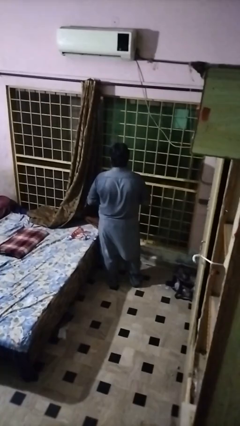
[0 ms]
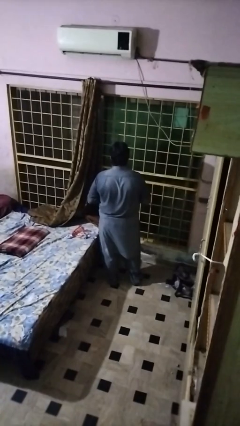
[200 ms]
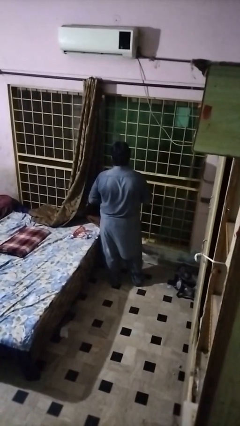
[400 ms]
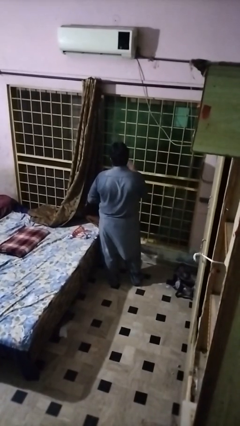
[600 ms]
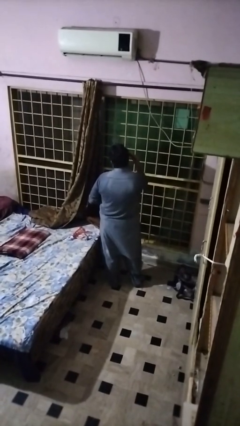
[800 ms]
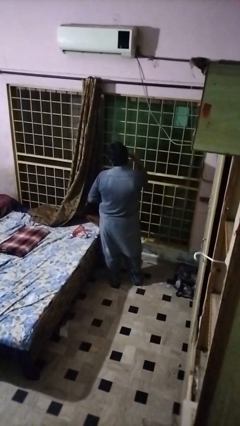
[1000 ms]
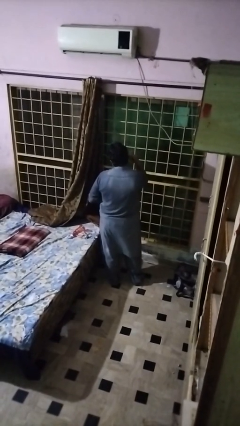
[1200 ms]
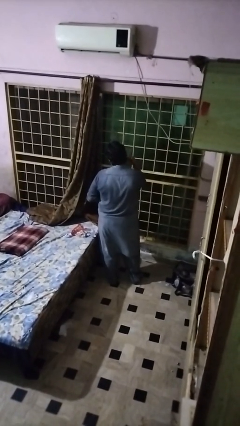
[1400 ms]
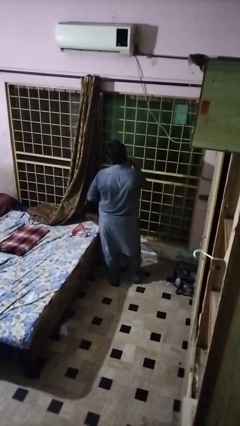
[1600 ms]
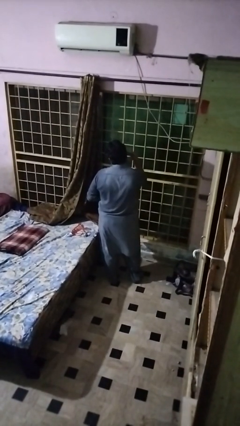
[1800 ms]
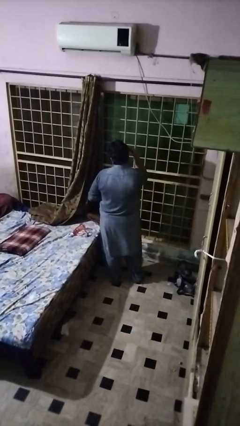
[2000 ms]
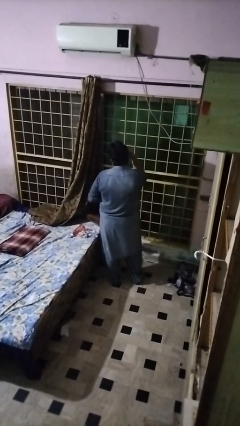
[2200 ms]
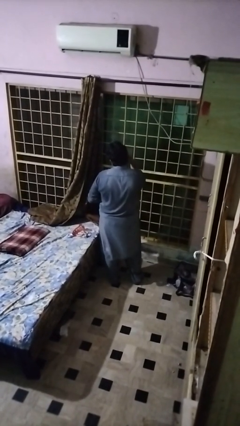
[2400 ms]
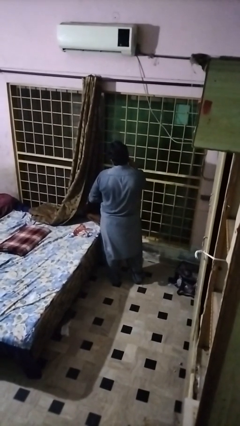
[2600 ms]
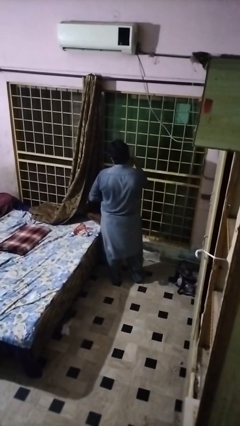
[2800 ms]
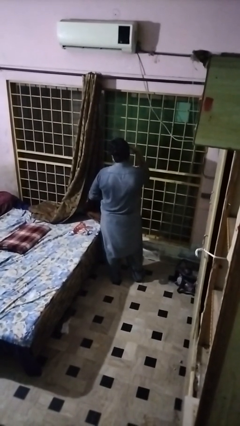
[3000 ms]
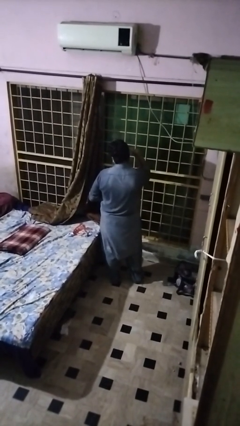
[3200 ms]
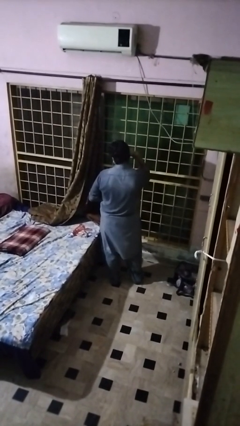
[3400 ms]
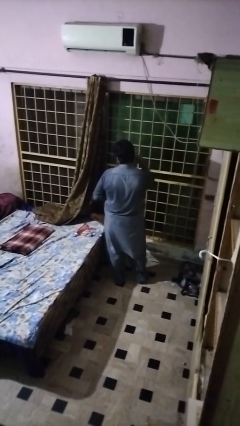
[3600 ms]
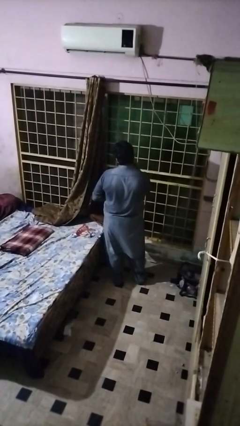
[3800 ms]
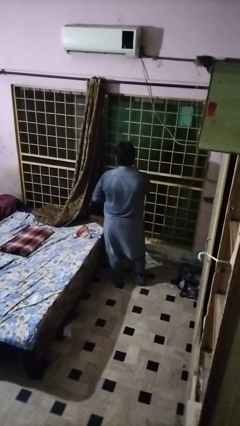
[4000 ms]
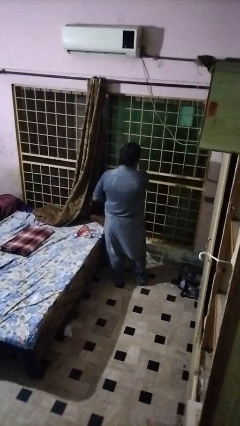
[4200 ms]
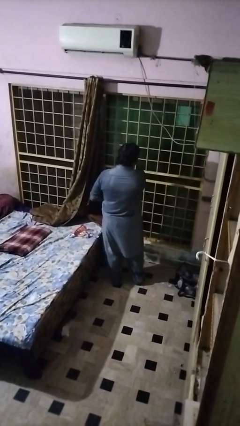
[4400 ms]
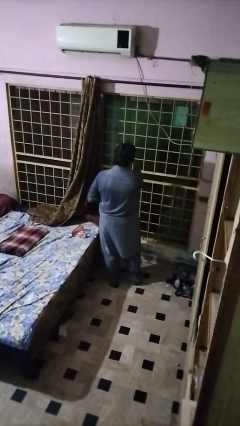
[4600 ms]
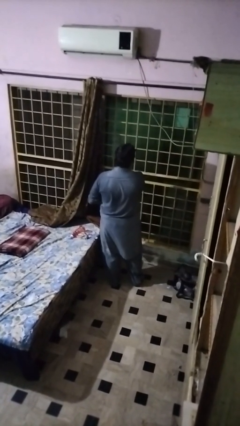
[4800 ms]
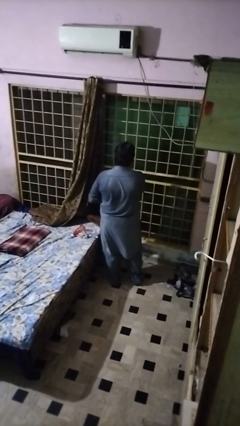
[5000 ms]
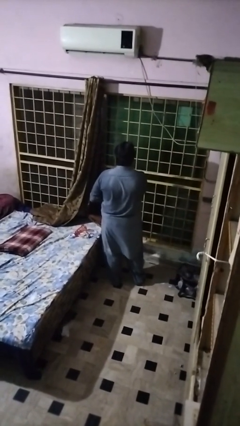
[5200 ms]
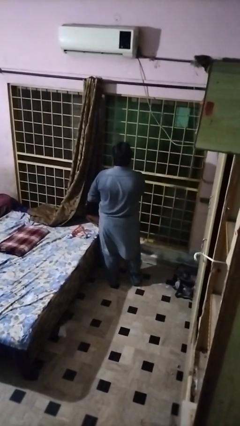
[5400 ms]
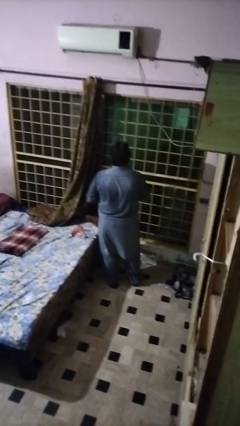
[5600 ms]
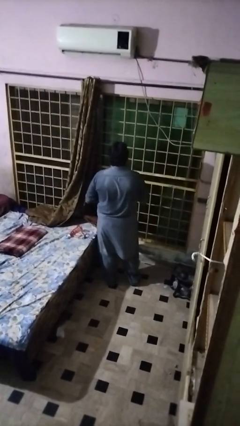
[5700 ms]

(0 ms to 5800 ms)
person shaves face

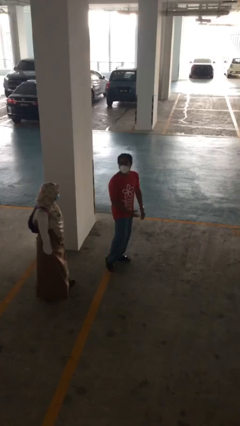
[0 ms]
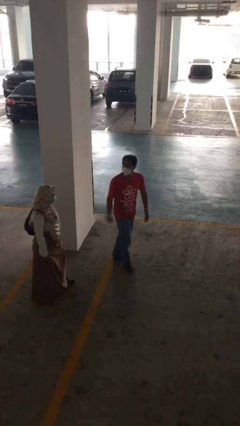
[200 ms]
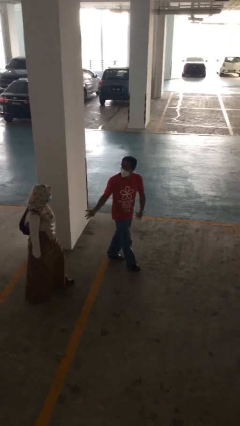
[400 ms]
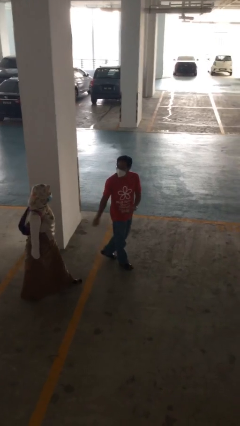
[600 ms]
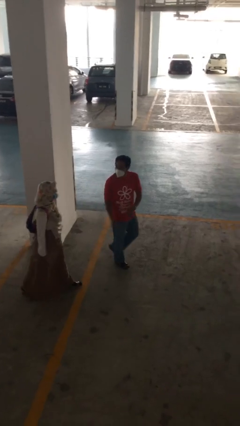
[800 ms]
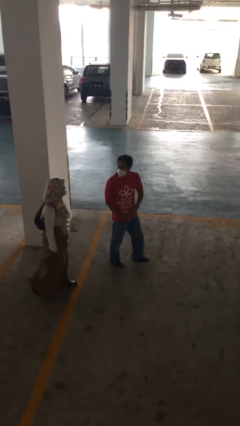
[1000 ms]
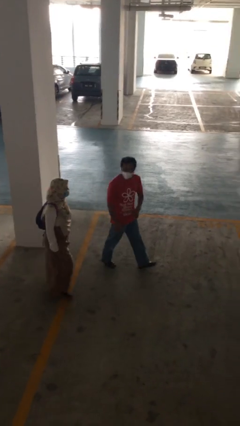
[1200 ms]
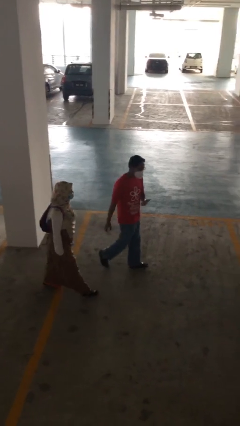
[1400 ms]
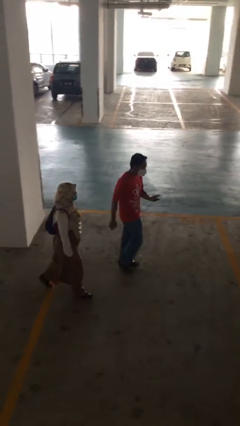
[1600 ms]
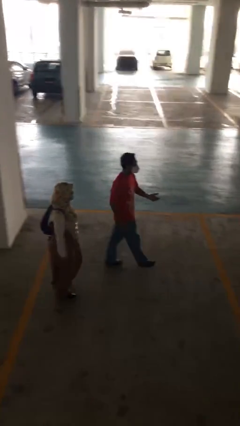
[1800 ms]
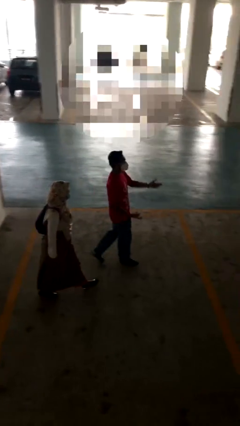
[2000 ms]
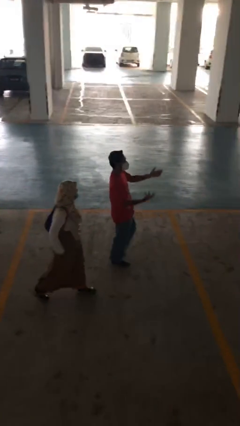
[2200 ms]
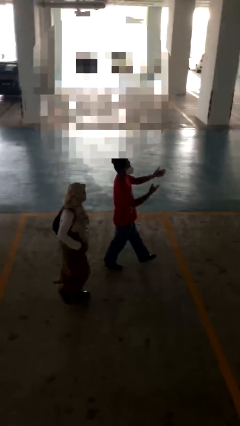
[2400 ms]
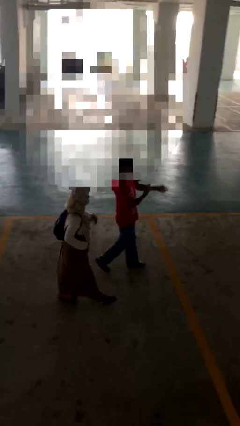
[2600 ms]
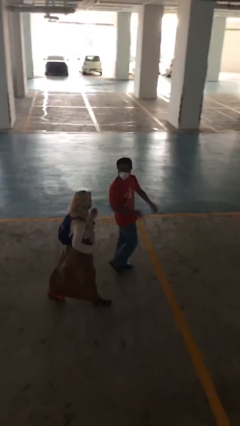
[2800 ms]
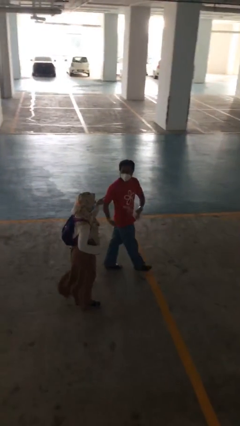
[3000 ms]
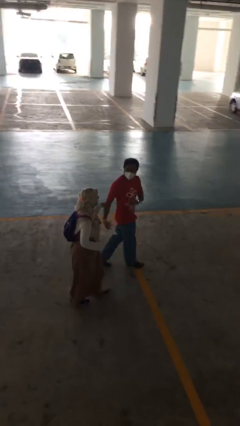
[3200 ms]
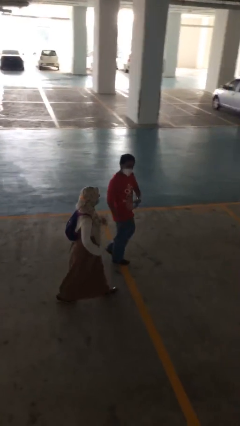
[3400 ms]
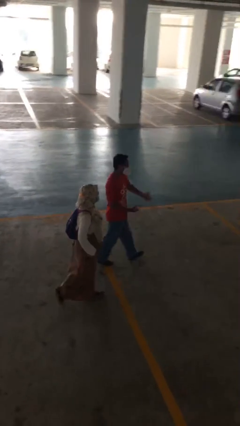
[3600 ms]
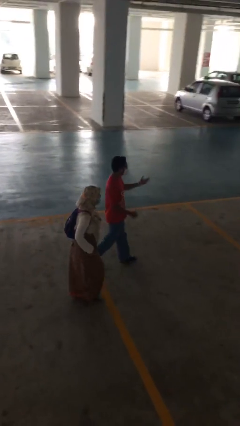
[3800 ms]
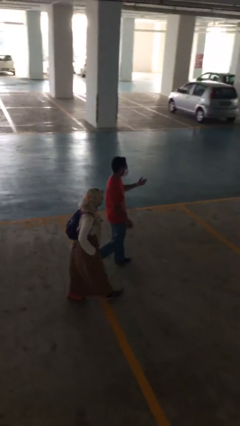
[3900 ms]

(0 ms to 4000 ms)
person talks to person

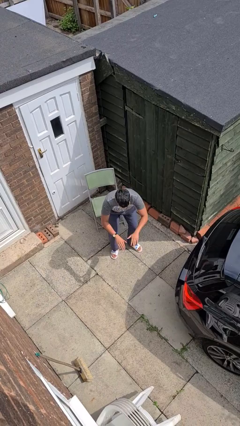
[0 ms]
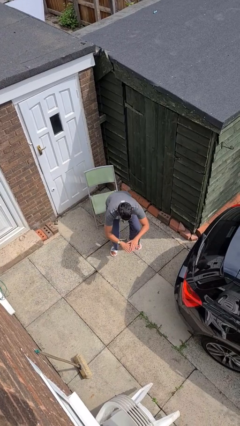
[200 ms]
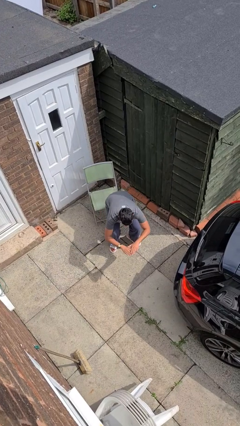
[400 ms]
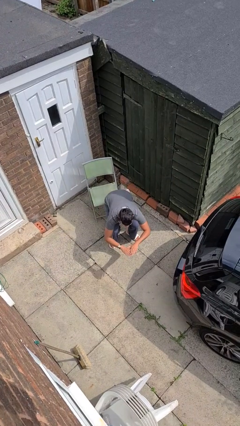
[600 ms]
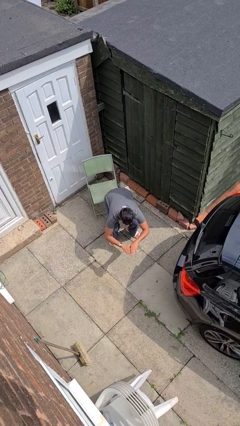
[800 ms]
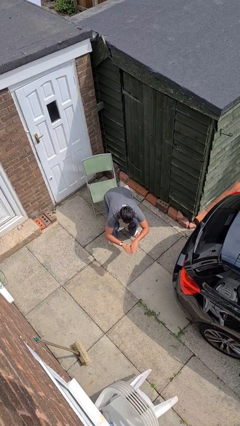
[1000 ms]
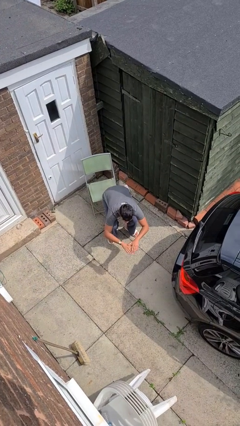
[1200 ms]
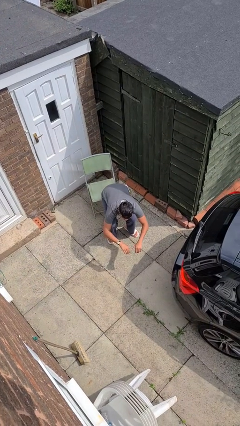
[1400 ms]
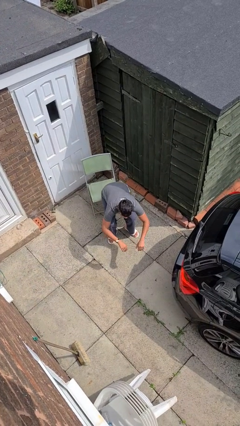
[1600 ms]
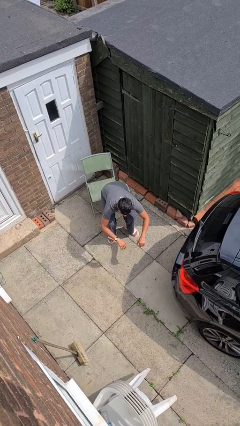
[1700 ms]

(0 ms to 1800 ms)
person squats

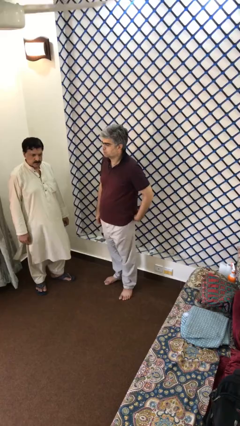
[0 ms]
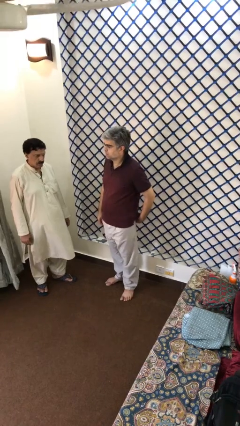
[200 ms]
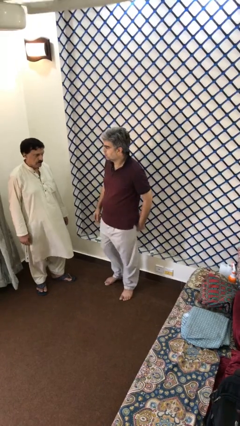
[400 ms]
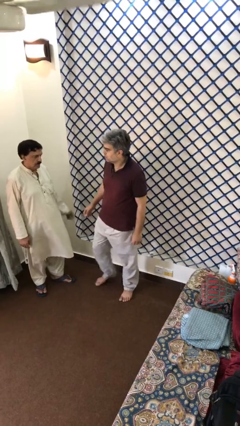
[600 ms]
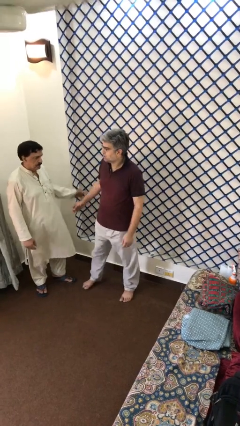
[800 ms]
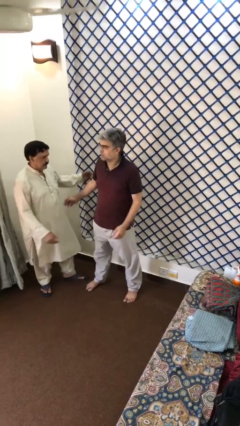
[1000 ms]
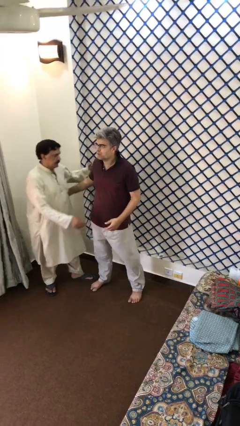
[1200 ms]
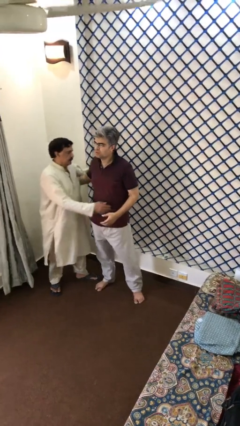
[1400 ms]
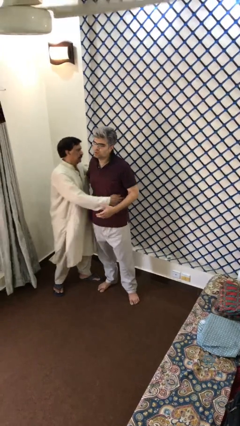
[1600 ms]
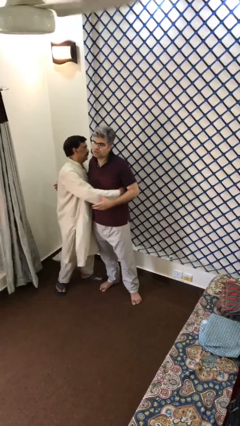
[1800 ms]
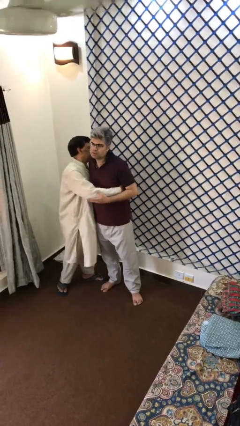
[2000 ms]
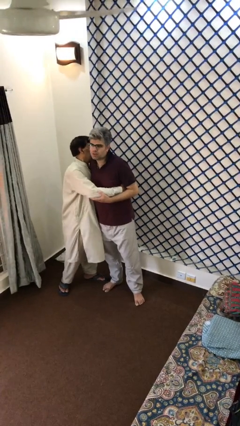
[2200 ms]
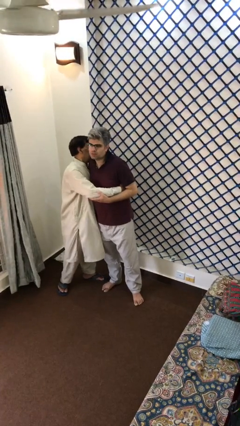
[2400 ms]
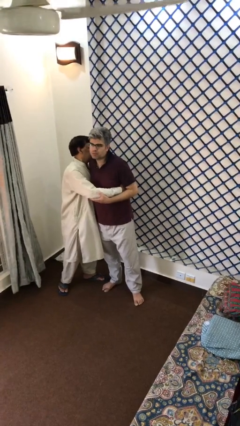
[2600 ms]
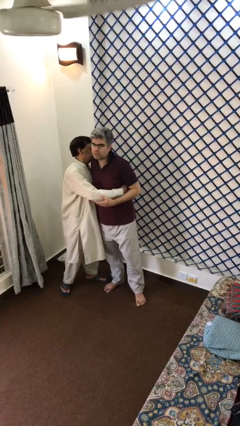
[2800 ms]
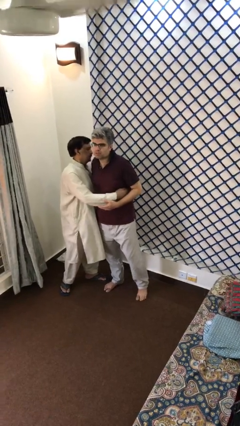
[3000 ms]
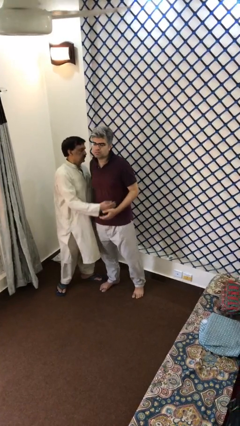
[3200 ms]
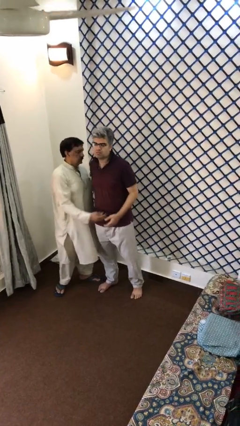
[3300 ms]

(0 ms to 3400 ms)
person embraces person

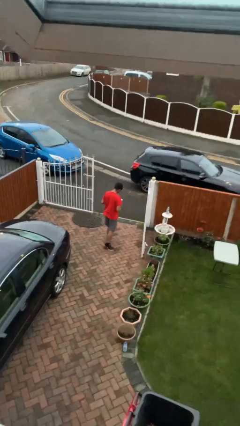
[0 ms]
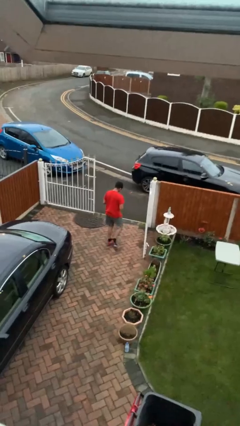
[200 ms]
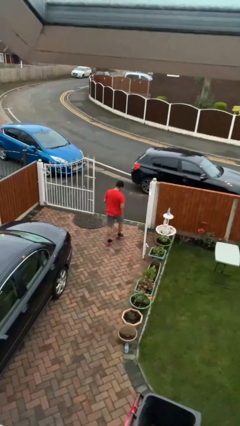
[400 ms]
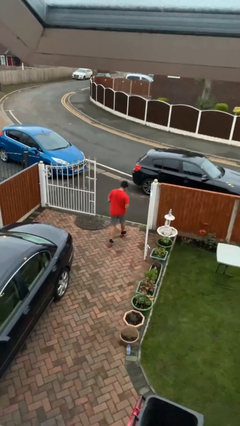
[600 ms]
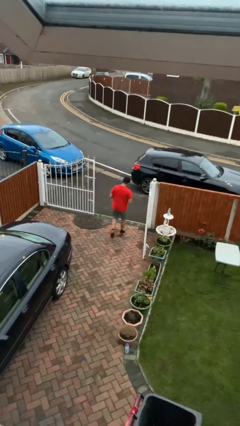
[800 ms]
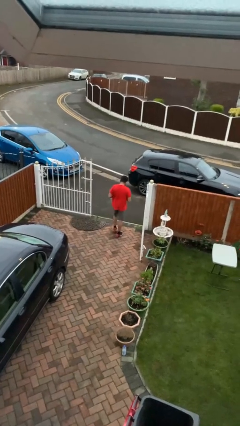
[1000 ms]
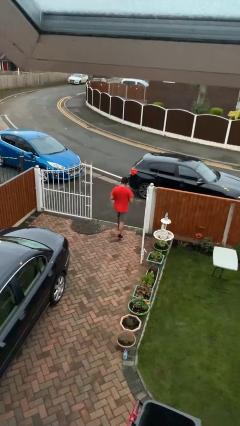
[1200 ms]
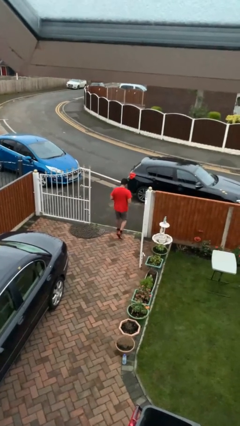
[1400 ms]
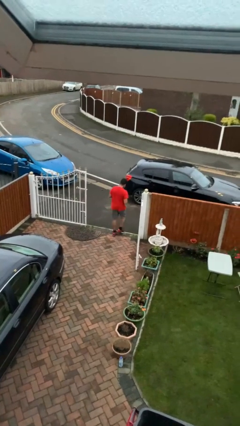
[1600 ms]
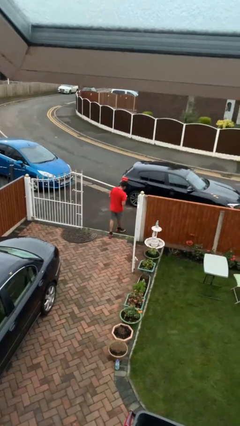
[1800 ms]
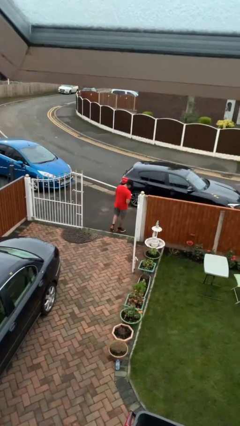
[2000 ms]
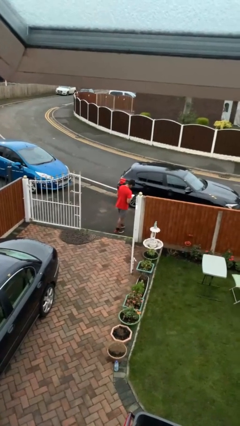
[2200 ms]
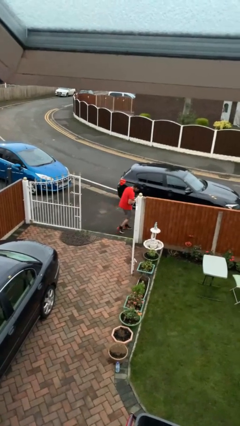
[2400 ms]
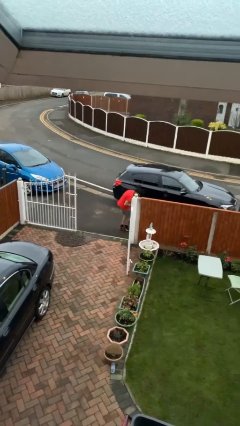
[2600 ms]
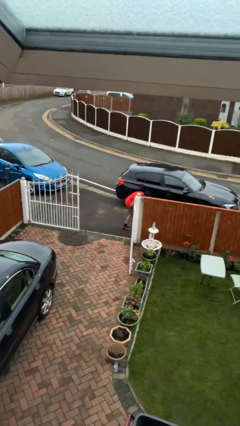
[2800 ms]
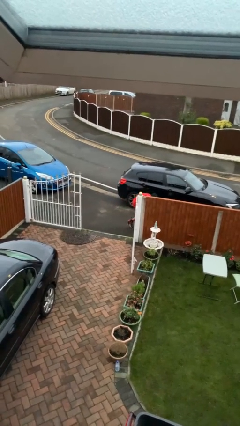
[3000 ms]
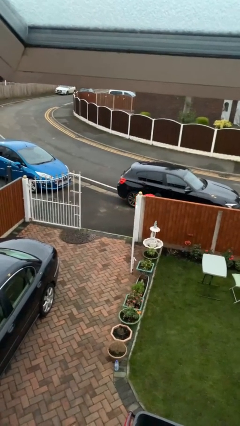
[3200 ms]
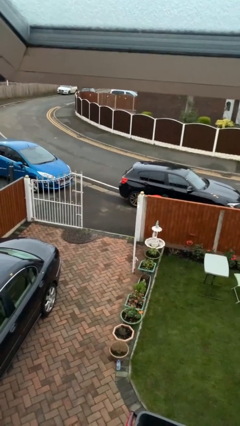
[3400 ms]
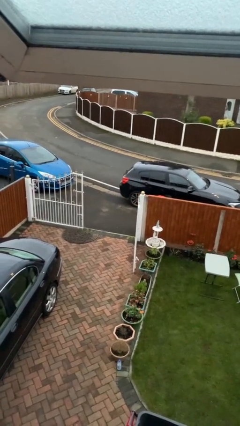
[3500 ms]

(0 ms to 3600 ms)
person exits scene through structure
